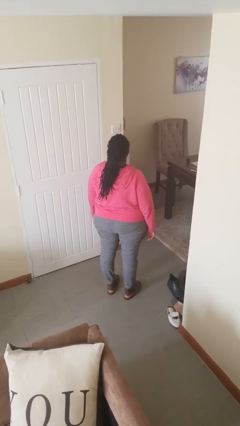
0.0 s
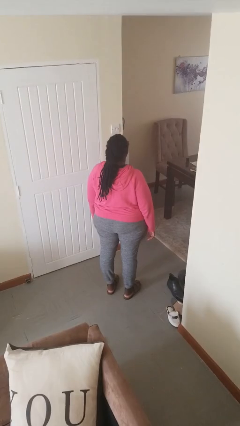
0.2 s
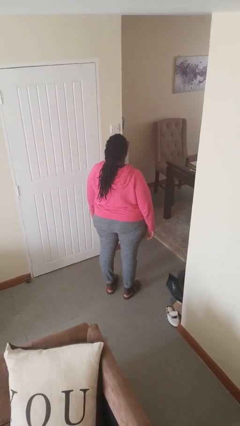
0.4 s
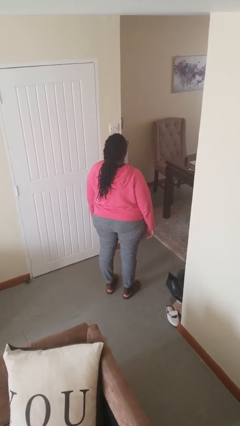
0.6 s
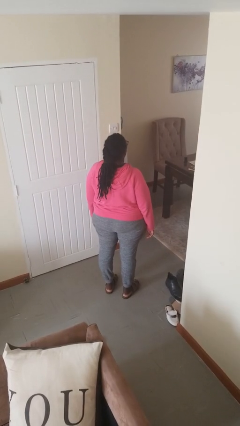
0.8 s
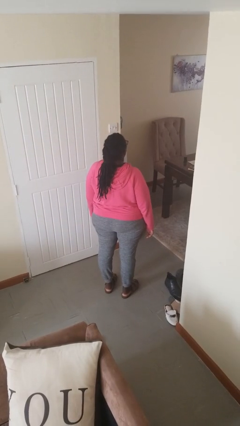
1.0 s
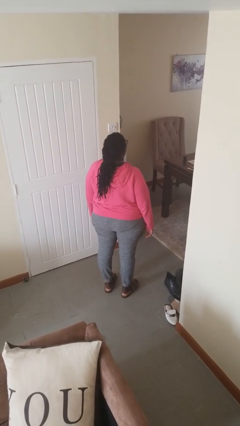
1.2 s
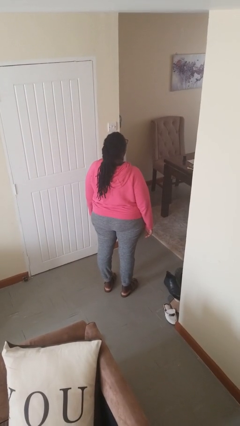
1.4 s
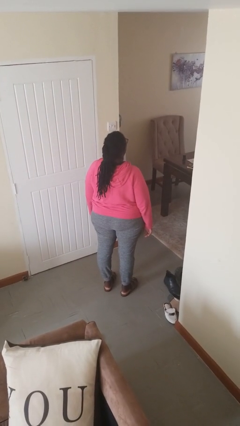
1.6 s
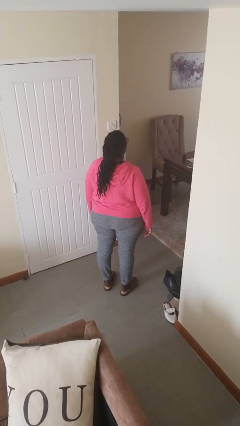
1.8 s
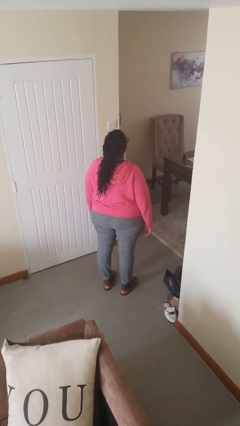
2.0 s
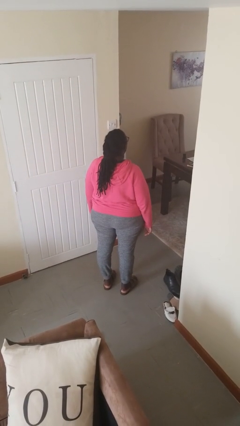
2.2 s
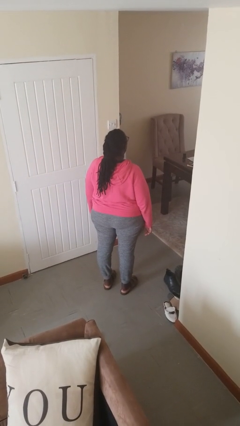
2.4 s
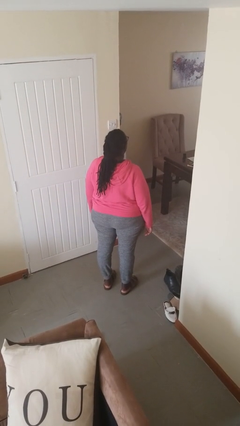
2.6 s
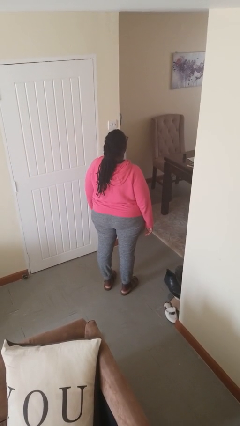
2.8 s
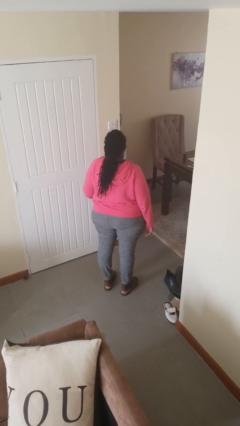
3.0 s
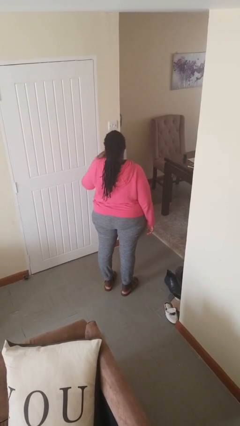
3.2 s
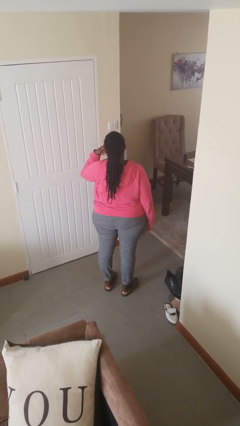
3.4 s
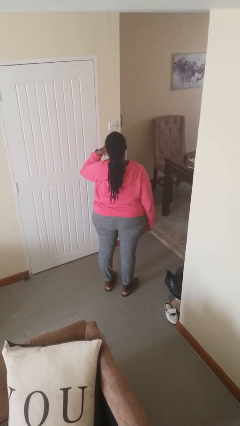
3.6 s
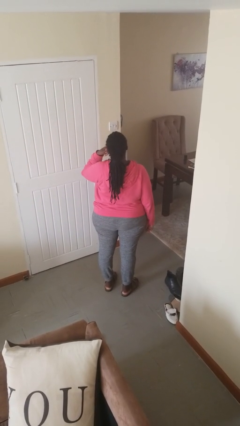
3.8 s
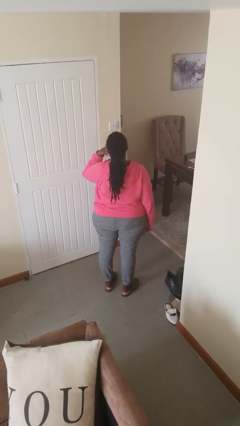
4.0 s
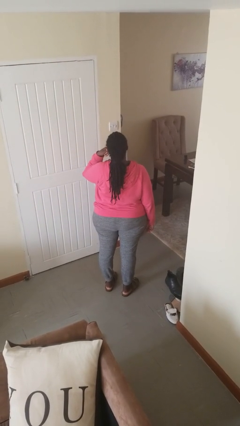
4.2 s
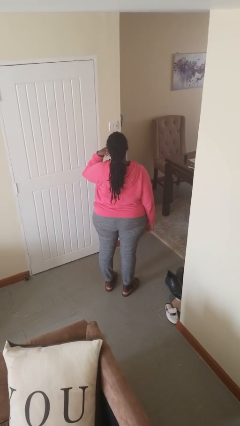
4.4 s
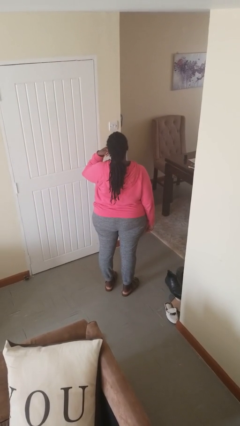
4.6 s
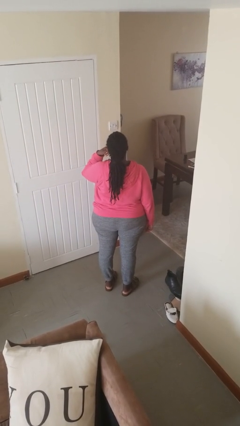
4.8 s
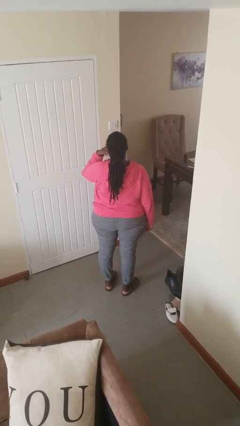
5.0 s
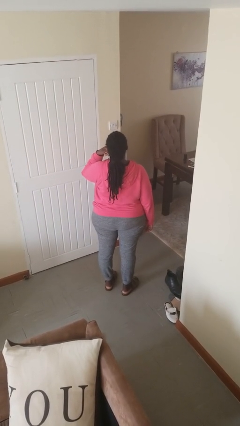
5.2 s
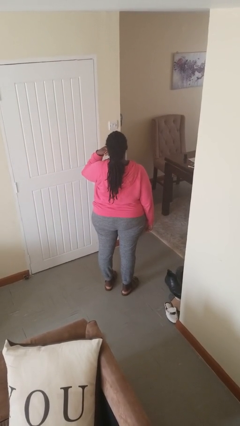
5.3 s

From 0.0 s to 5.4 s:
person gestures call me

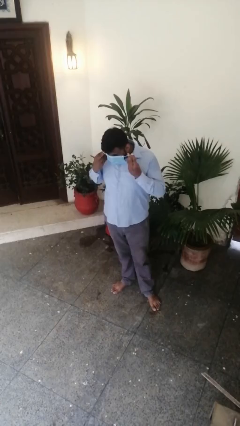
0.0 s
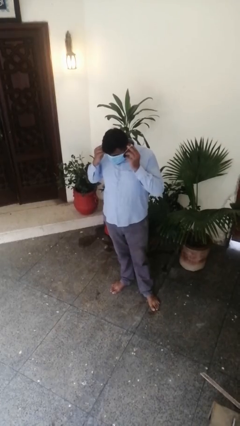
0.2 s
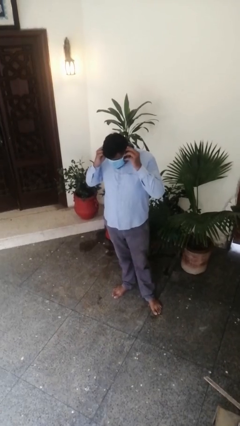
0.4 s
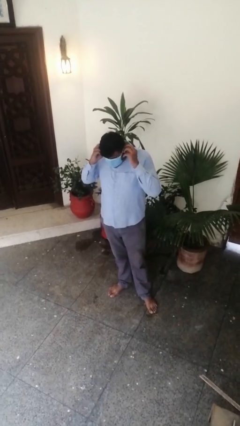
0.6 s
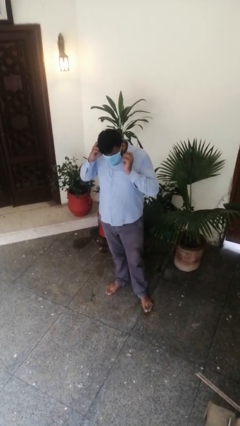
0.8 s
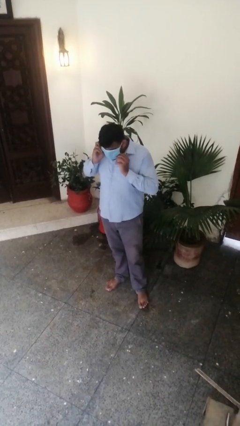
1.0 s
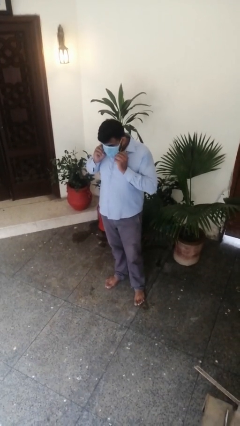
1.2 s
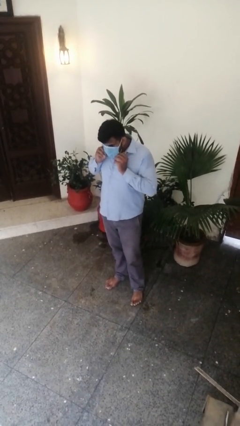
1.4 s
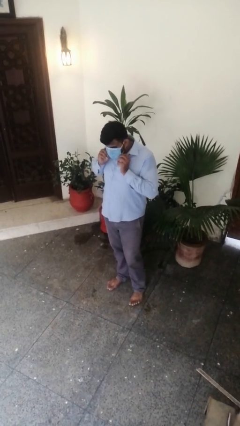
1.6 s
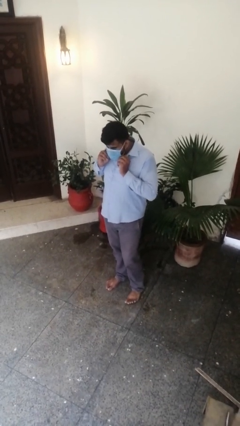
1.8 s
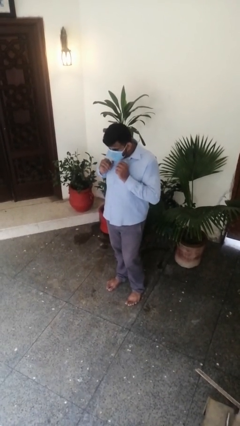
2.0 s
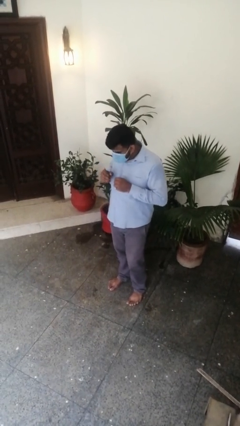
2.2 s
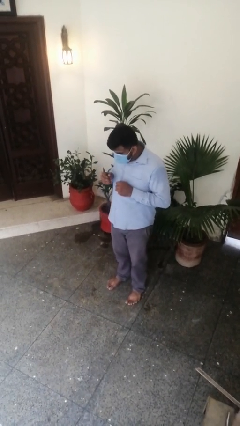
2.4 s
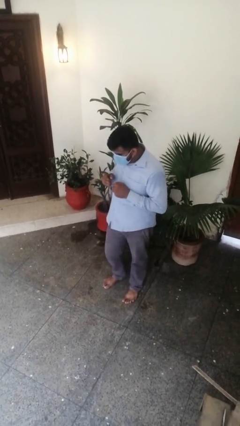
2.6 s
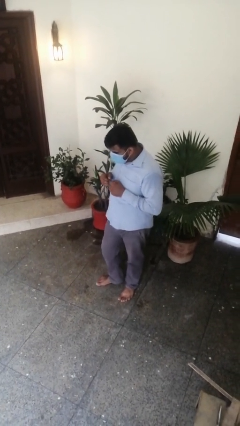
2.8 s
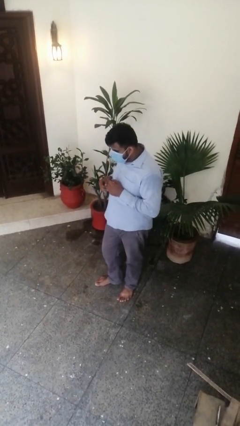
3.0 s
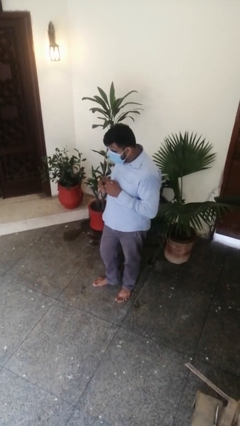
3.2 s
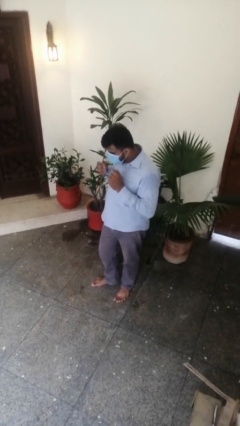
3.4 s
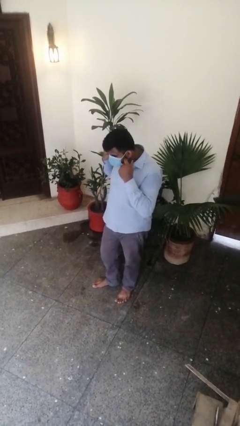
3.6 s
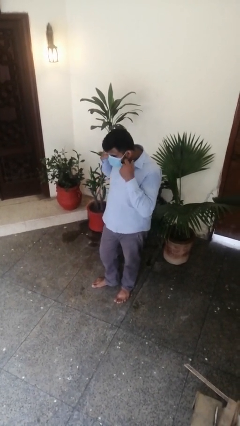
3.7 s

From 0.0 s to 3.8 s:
person puts on facemask

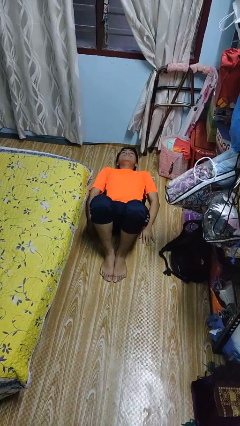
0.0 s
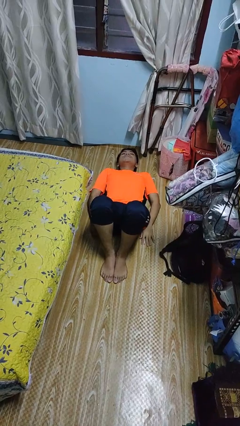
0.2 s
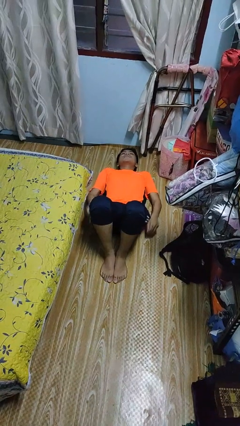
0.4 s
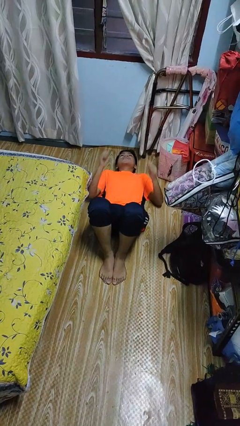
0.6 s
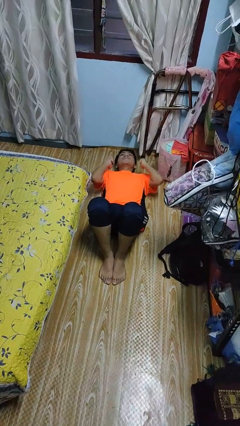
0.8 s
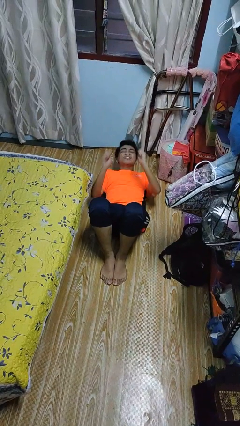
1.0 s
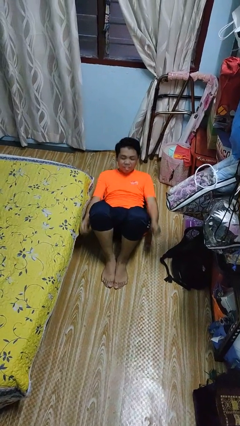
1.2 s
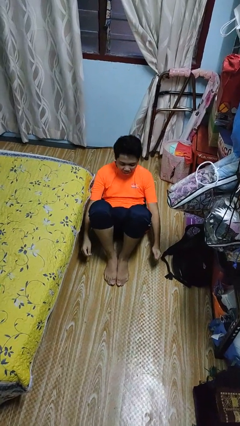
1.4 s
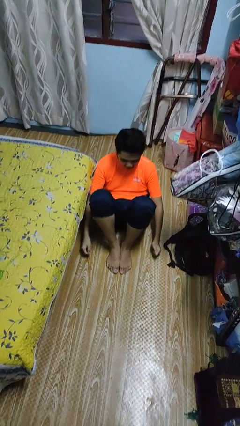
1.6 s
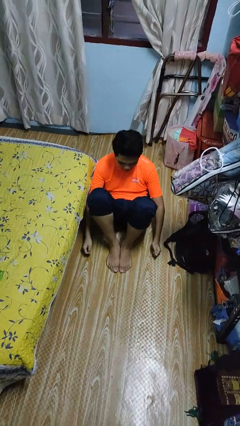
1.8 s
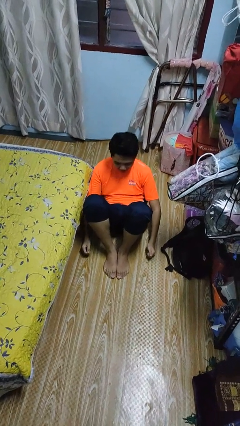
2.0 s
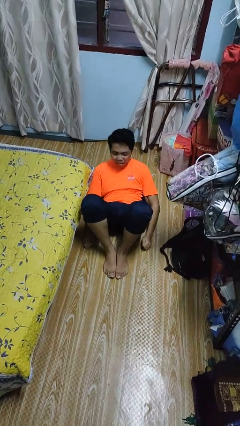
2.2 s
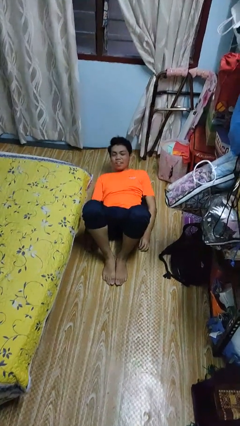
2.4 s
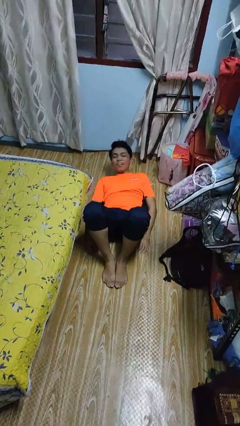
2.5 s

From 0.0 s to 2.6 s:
person exercises with situp

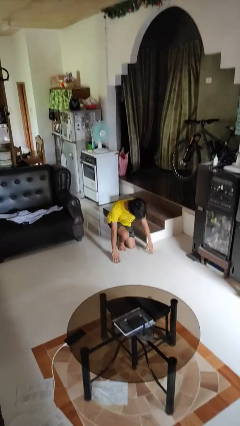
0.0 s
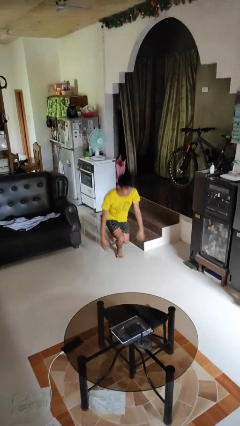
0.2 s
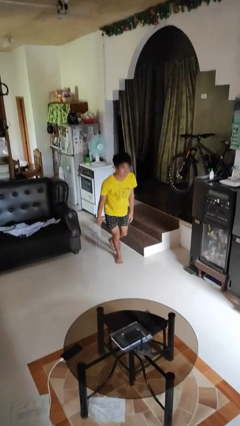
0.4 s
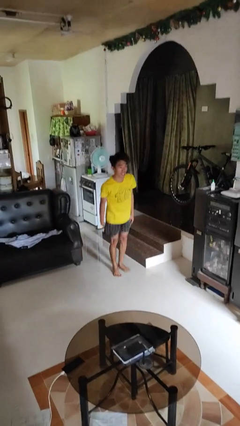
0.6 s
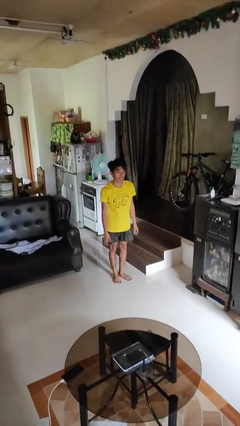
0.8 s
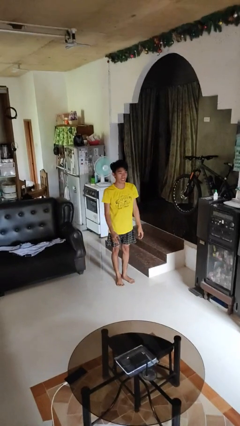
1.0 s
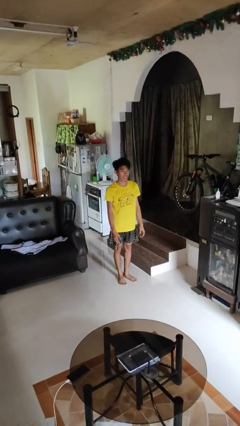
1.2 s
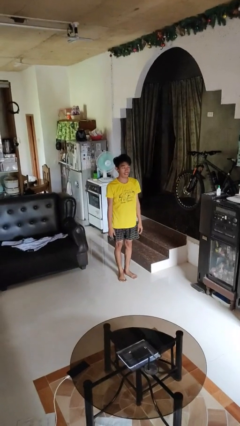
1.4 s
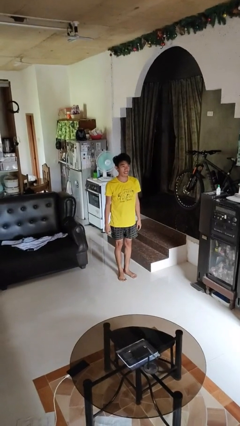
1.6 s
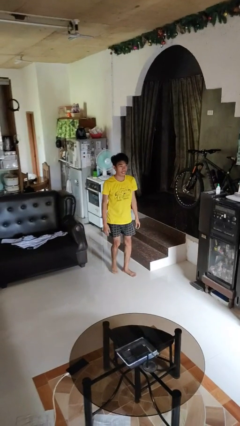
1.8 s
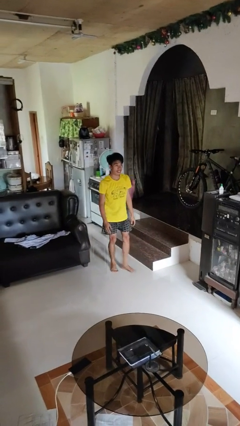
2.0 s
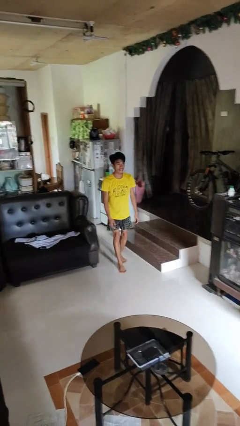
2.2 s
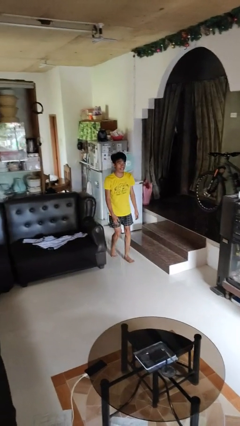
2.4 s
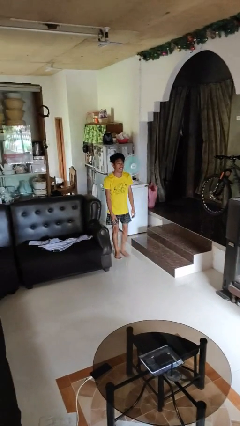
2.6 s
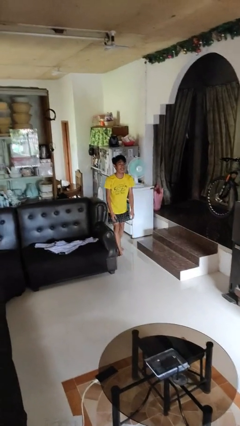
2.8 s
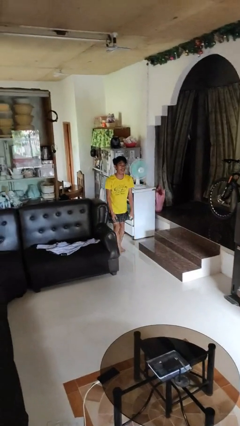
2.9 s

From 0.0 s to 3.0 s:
person stands up from floor

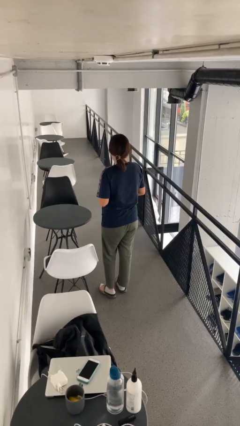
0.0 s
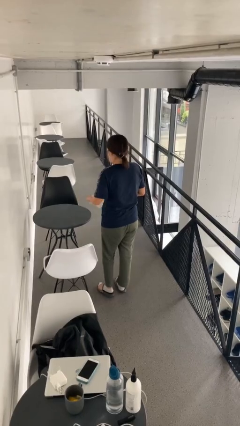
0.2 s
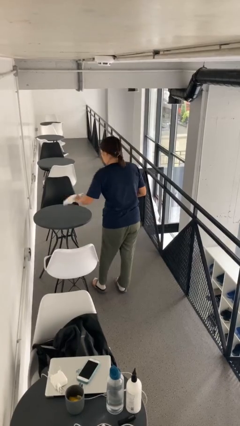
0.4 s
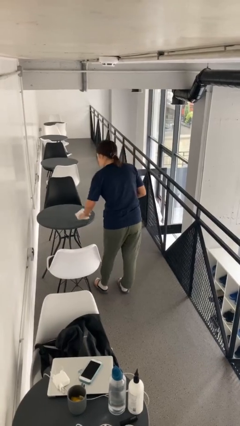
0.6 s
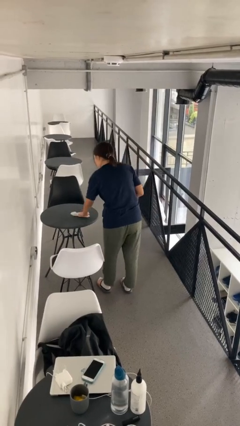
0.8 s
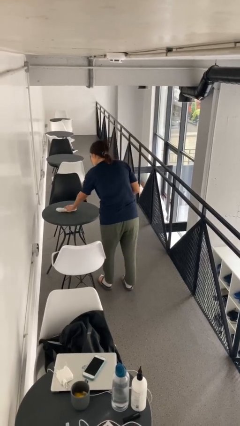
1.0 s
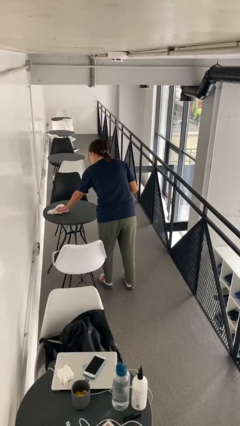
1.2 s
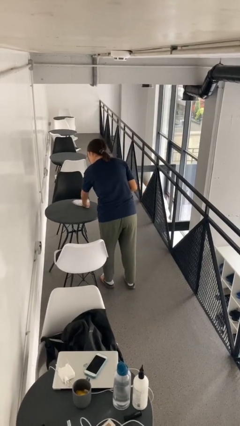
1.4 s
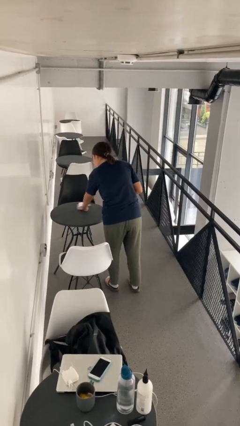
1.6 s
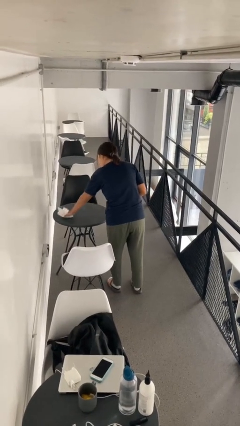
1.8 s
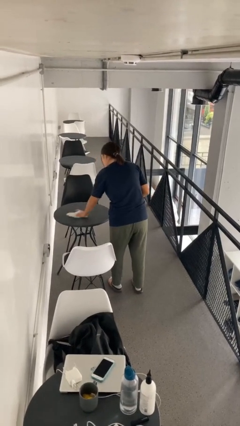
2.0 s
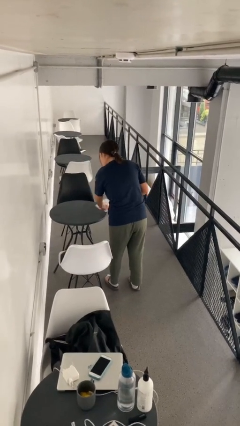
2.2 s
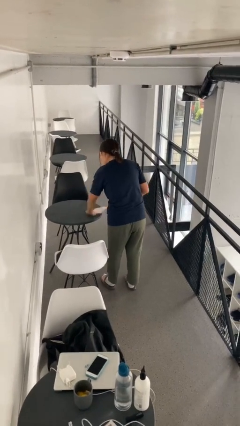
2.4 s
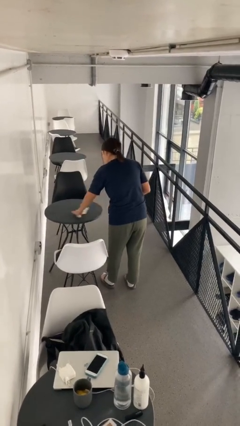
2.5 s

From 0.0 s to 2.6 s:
person cleans table with rag

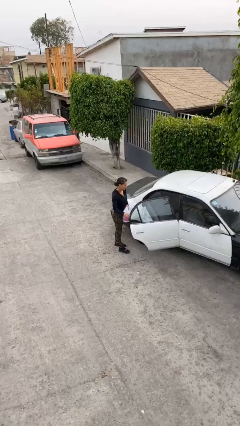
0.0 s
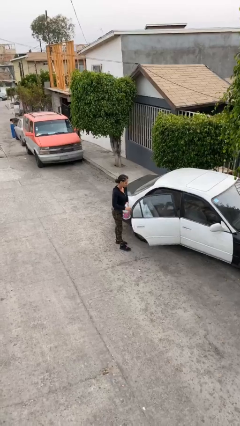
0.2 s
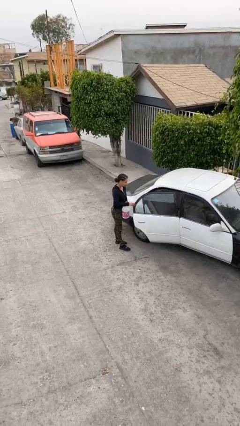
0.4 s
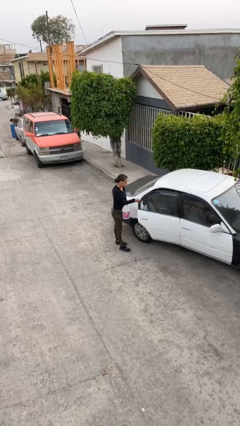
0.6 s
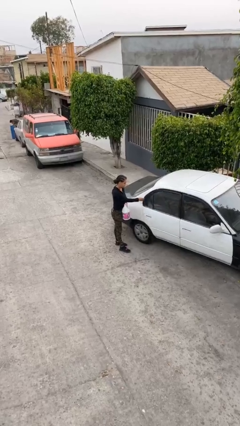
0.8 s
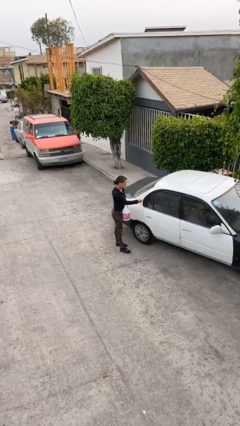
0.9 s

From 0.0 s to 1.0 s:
person closes car door
